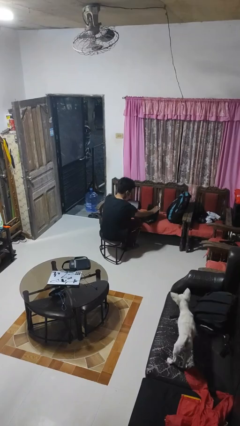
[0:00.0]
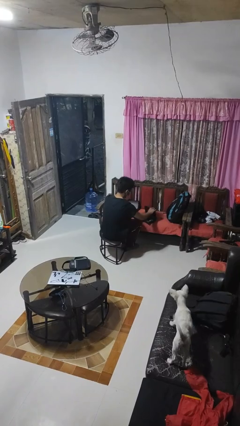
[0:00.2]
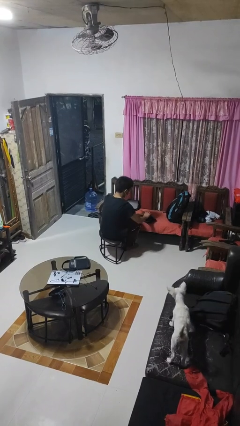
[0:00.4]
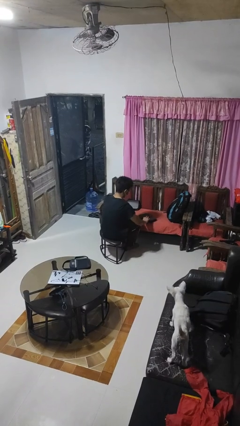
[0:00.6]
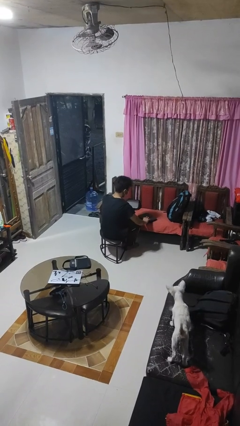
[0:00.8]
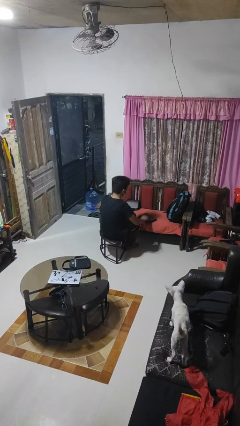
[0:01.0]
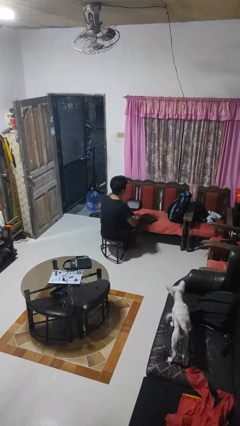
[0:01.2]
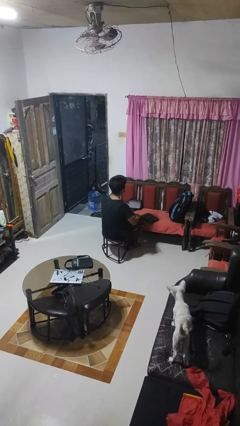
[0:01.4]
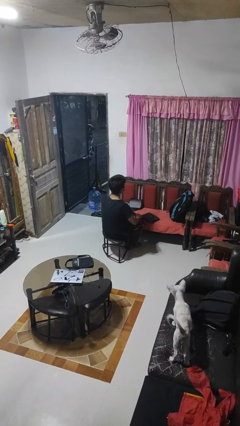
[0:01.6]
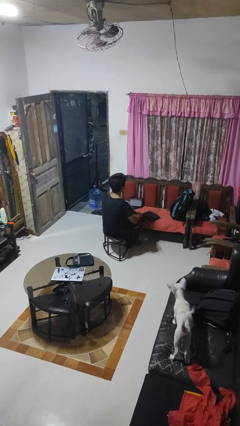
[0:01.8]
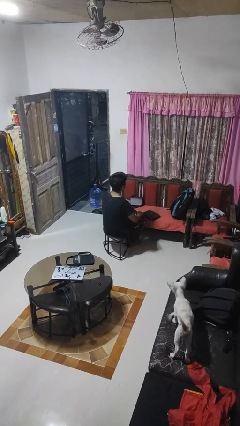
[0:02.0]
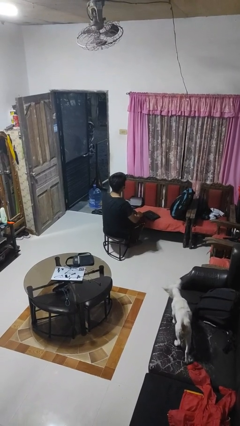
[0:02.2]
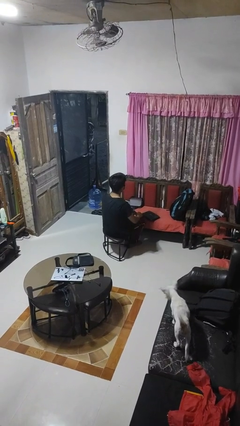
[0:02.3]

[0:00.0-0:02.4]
person closes laptop

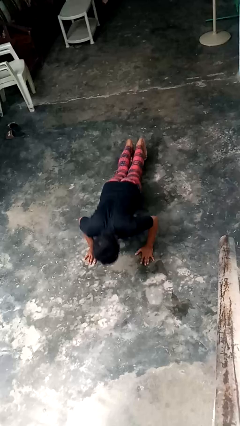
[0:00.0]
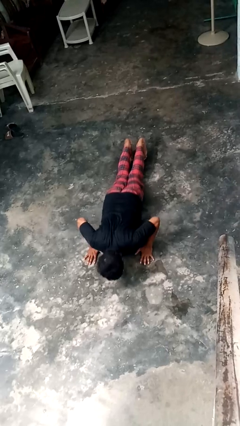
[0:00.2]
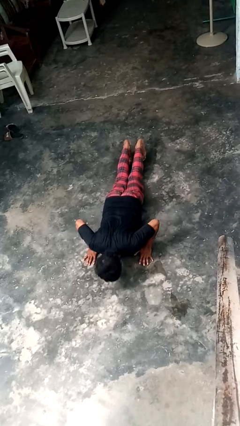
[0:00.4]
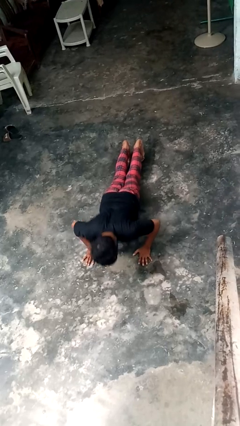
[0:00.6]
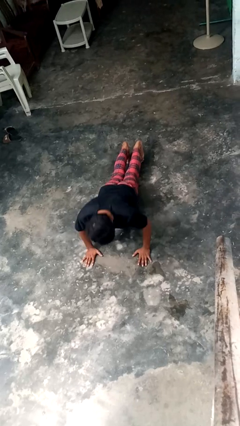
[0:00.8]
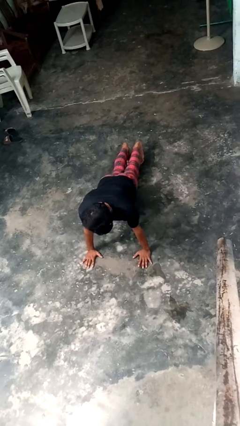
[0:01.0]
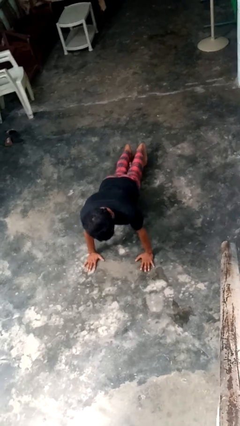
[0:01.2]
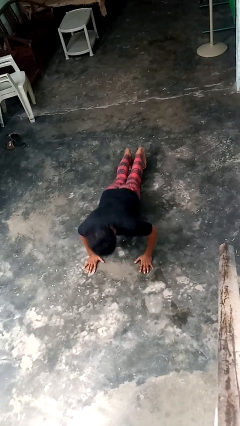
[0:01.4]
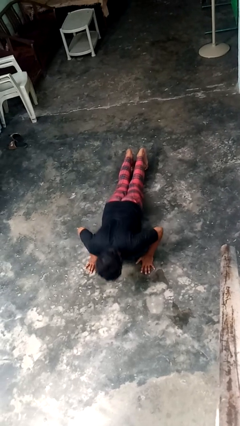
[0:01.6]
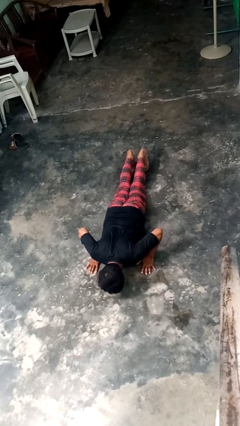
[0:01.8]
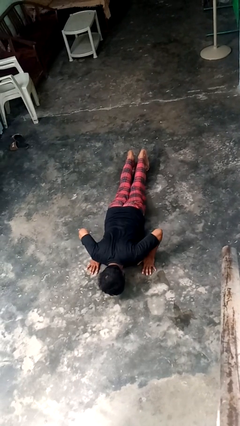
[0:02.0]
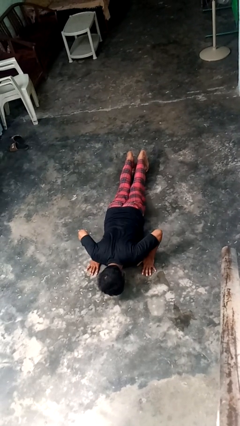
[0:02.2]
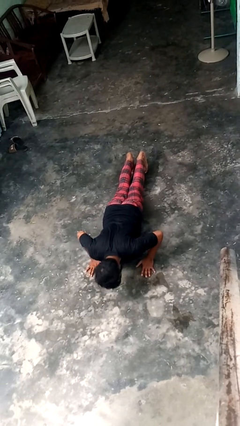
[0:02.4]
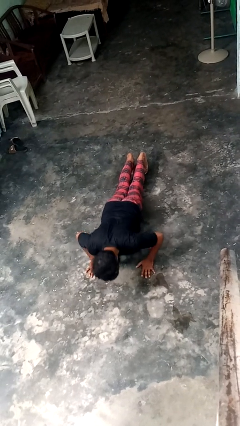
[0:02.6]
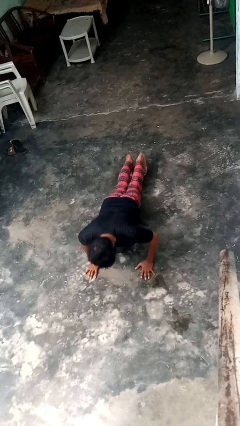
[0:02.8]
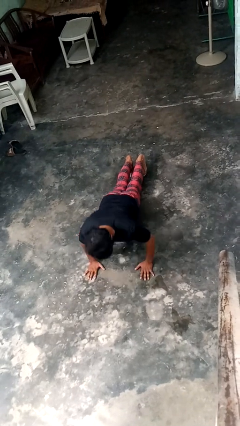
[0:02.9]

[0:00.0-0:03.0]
person exercises with pushup

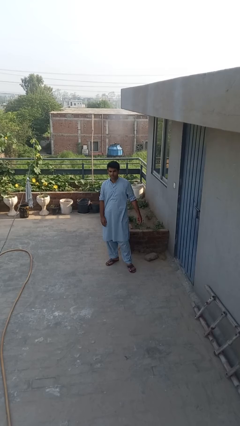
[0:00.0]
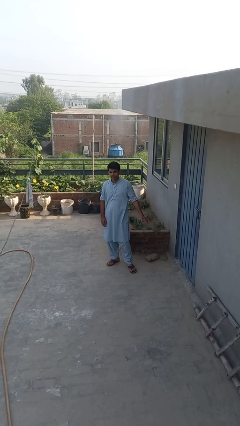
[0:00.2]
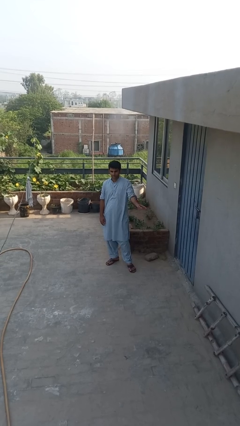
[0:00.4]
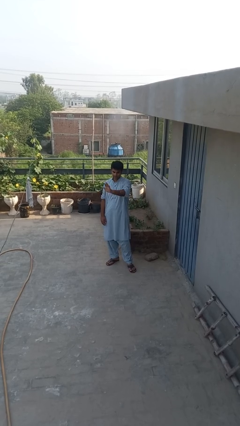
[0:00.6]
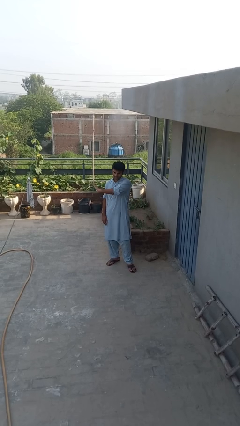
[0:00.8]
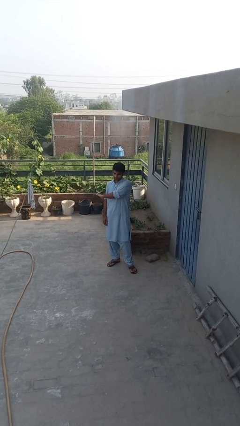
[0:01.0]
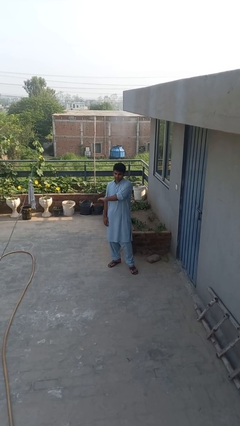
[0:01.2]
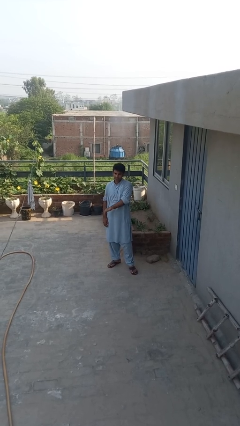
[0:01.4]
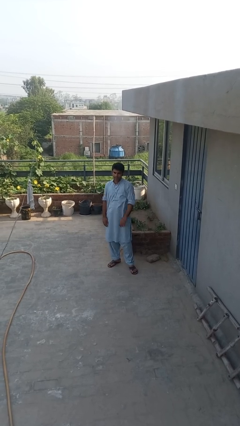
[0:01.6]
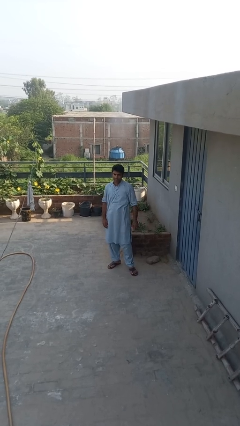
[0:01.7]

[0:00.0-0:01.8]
person gestures swipe right

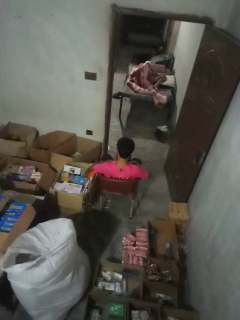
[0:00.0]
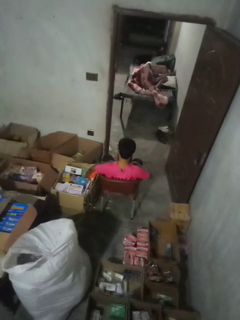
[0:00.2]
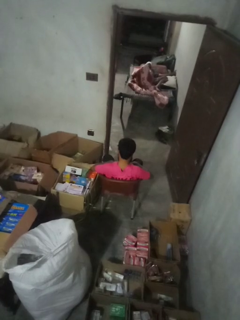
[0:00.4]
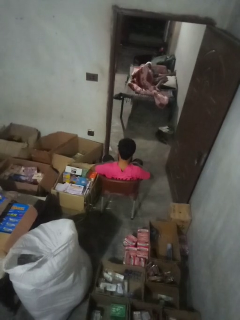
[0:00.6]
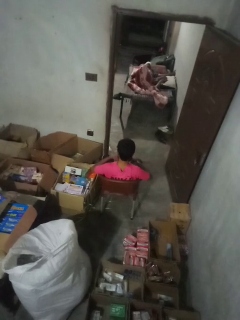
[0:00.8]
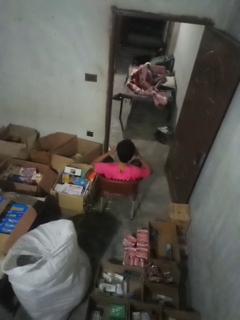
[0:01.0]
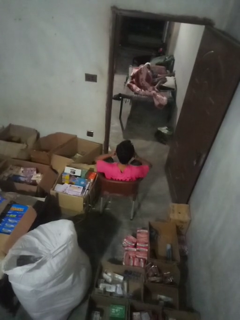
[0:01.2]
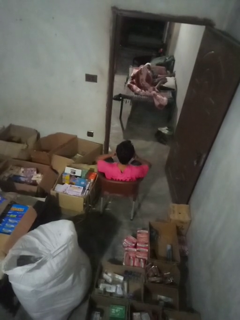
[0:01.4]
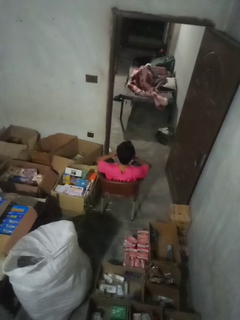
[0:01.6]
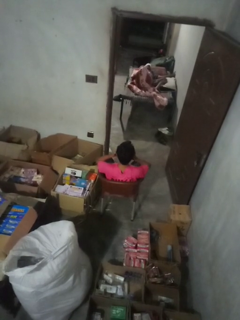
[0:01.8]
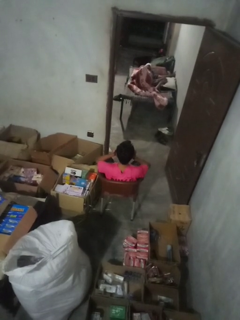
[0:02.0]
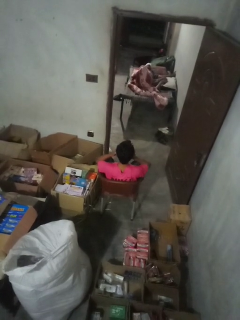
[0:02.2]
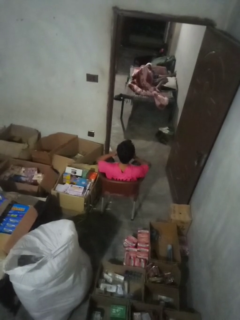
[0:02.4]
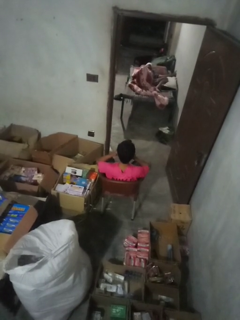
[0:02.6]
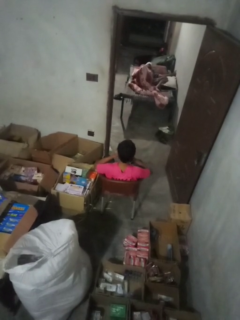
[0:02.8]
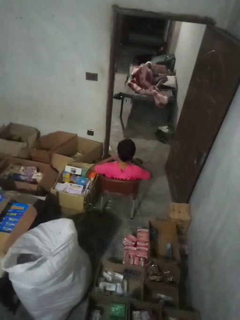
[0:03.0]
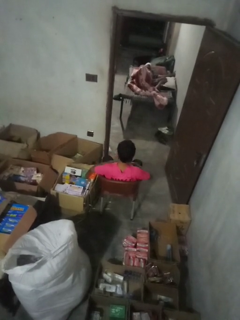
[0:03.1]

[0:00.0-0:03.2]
person rubs eyes

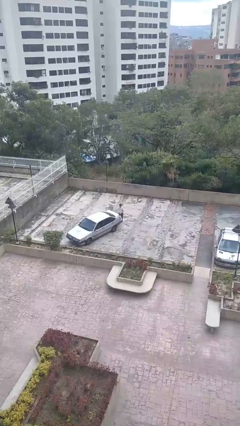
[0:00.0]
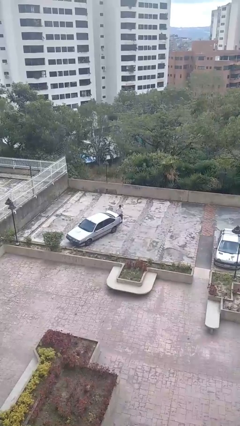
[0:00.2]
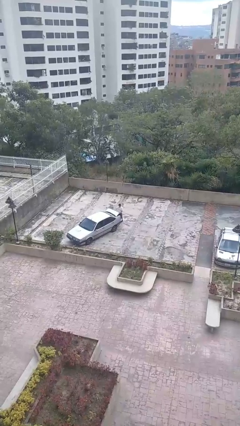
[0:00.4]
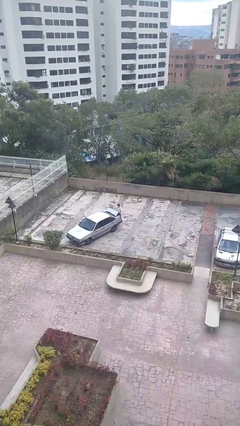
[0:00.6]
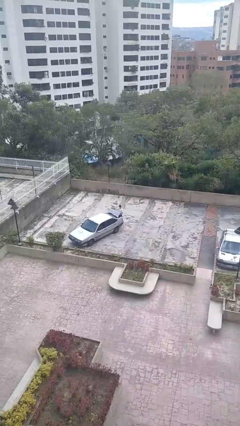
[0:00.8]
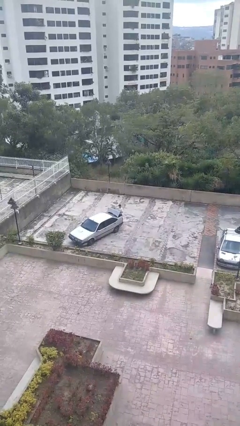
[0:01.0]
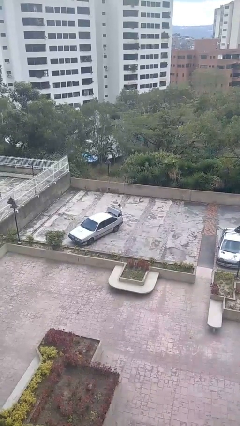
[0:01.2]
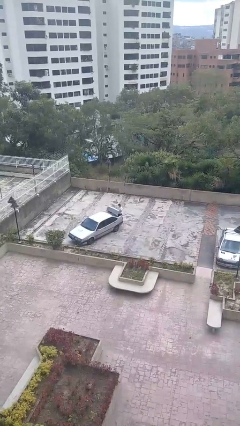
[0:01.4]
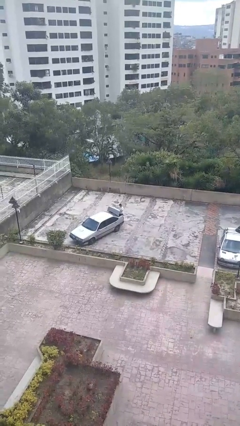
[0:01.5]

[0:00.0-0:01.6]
person opens car trunk

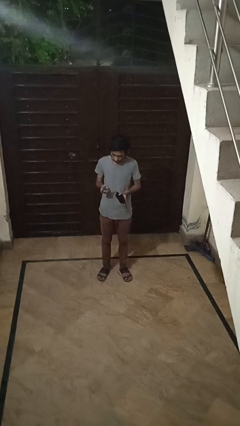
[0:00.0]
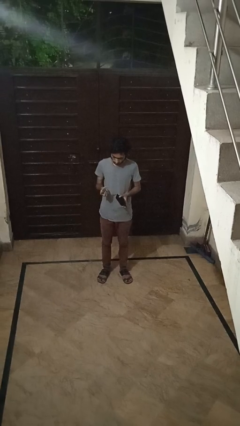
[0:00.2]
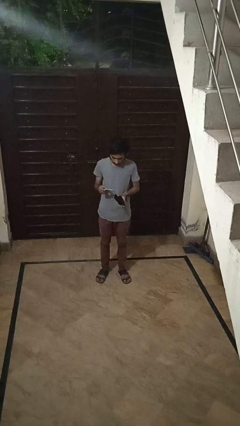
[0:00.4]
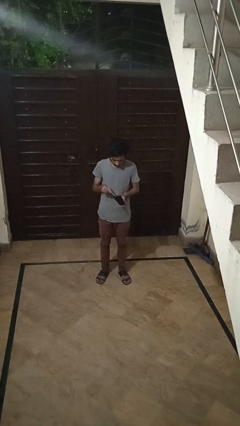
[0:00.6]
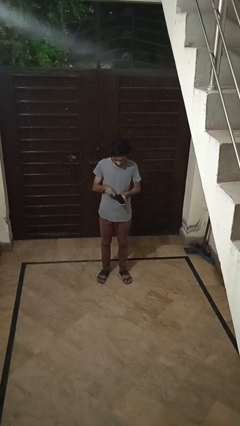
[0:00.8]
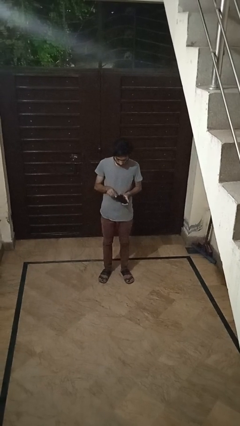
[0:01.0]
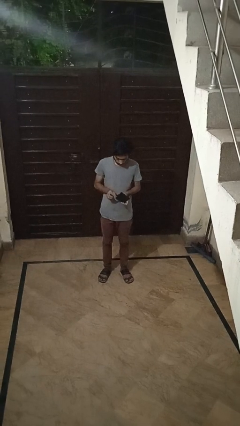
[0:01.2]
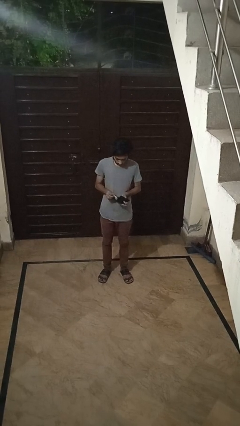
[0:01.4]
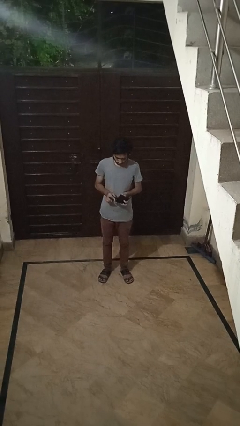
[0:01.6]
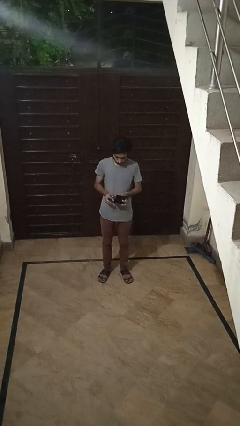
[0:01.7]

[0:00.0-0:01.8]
person puts object into purse

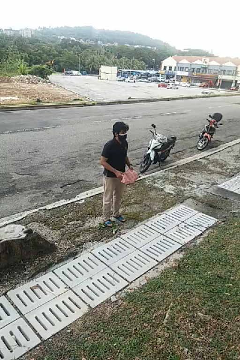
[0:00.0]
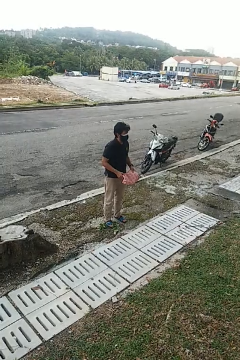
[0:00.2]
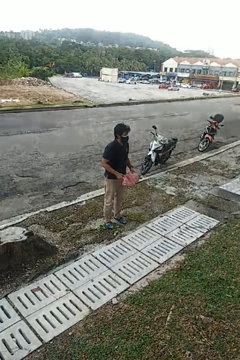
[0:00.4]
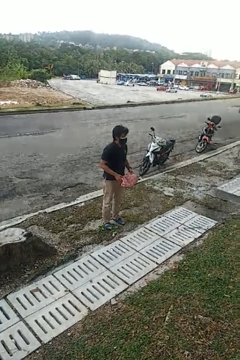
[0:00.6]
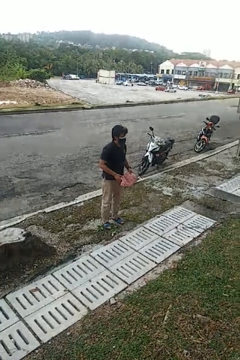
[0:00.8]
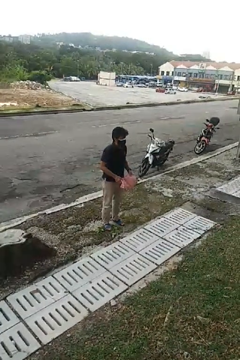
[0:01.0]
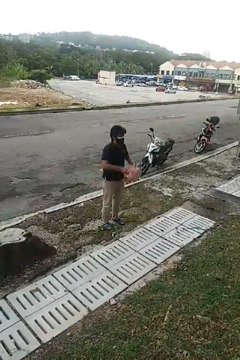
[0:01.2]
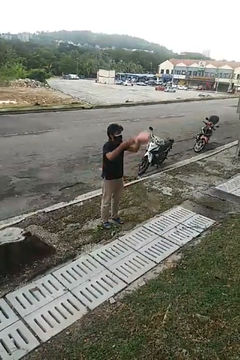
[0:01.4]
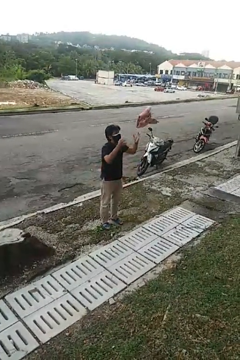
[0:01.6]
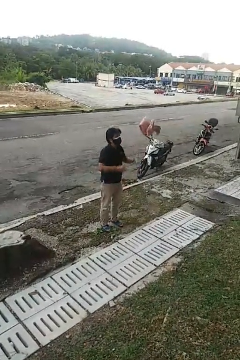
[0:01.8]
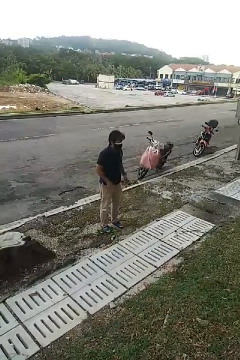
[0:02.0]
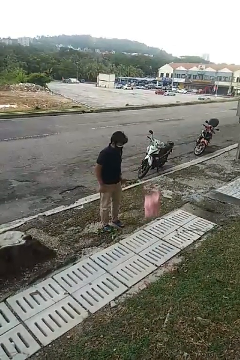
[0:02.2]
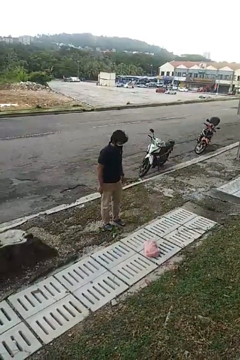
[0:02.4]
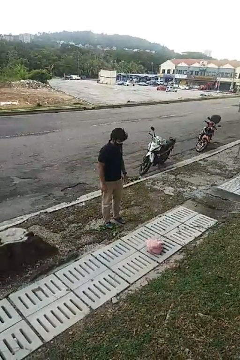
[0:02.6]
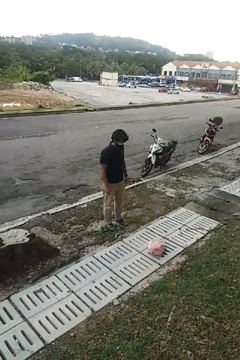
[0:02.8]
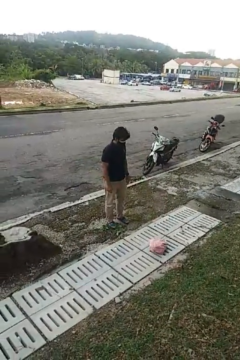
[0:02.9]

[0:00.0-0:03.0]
person throws object into air

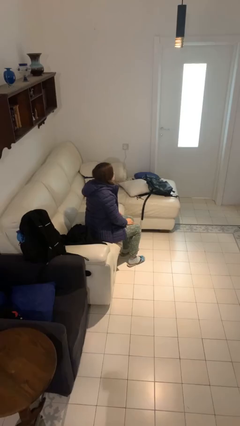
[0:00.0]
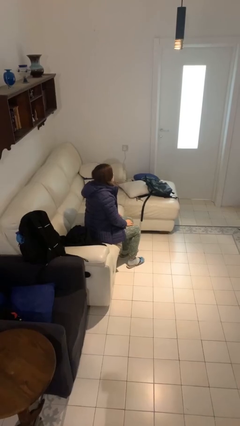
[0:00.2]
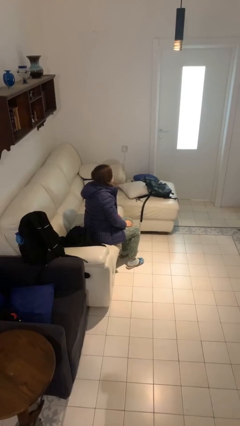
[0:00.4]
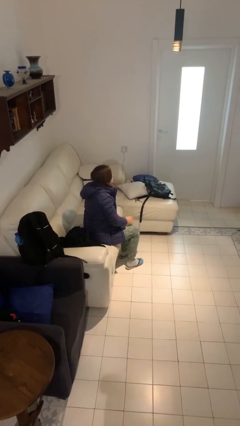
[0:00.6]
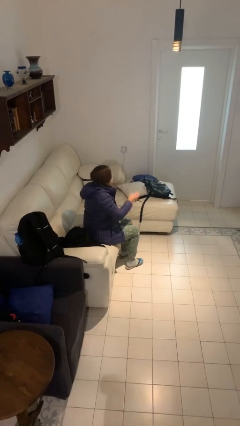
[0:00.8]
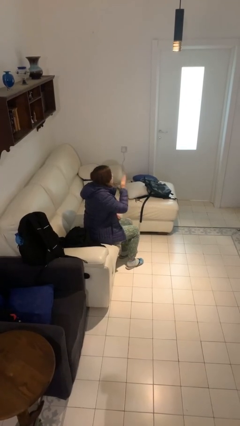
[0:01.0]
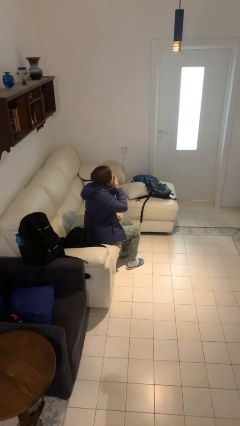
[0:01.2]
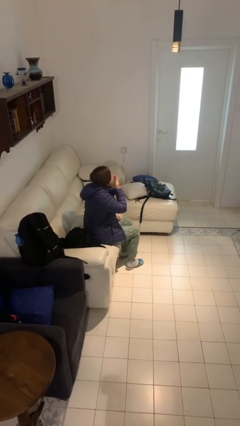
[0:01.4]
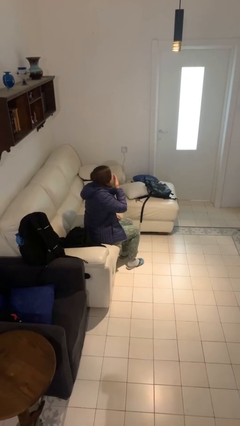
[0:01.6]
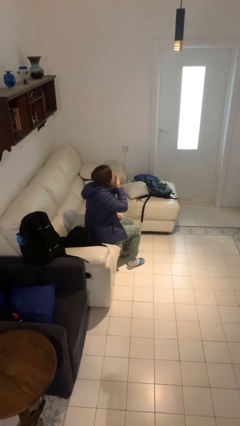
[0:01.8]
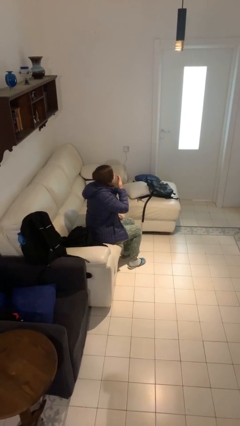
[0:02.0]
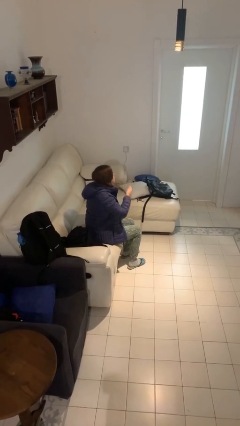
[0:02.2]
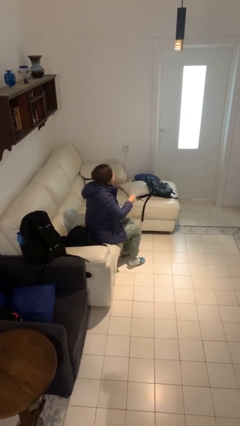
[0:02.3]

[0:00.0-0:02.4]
person yawns
